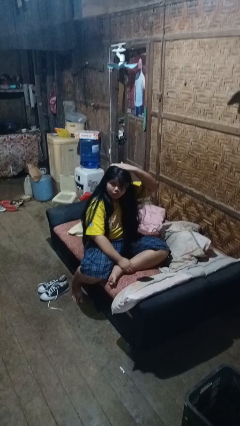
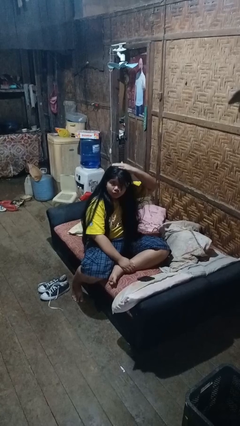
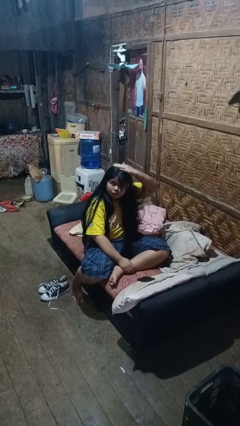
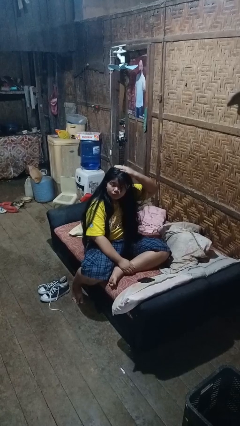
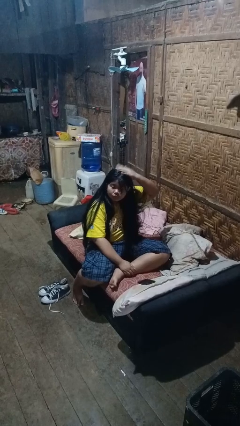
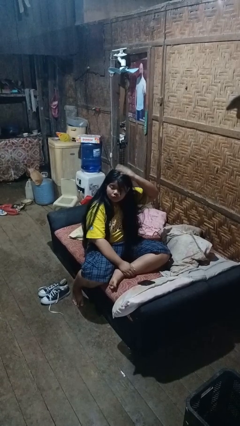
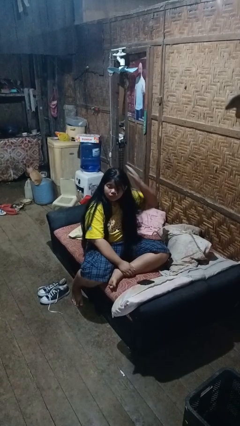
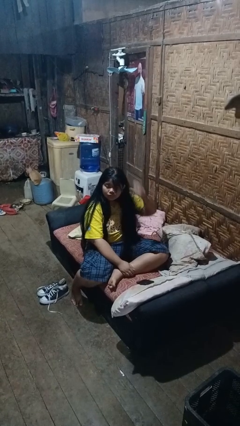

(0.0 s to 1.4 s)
person pats head

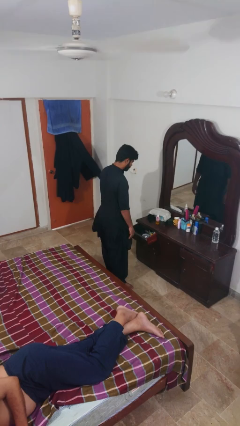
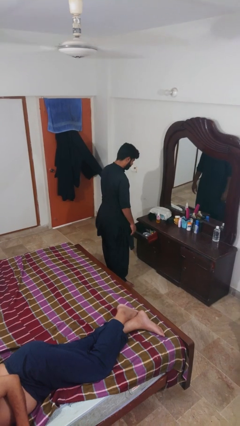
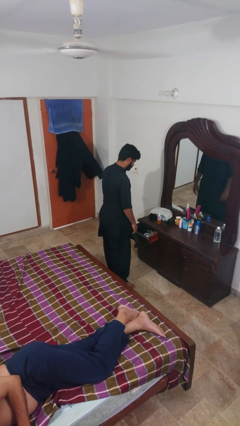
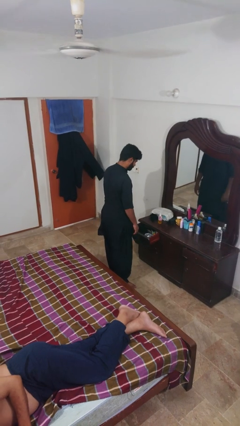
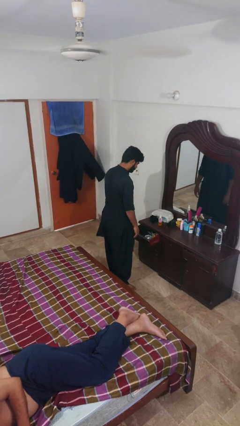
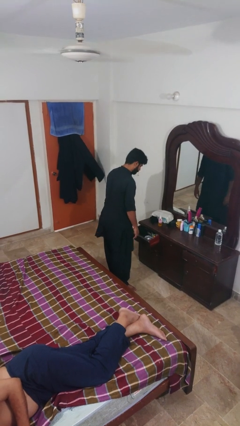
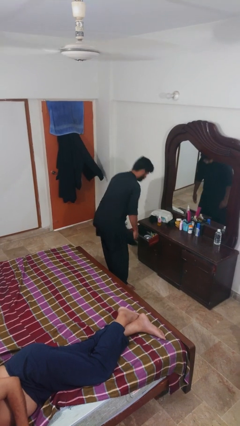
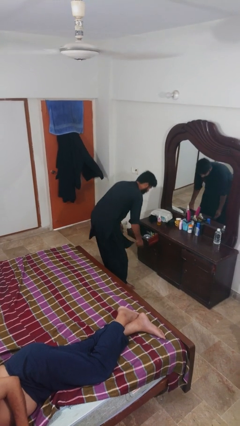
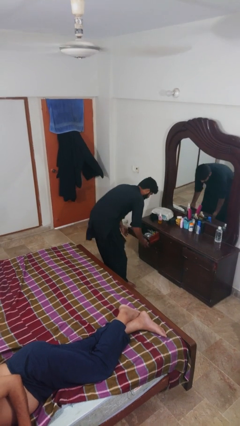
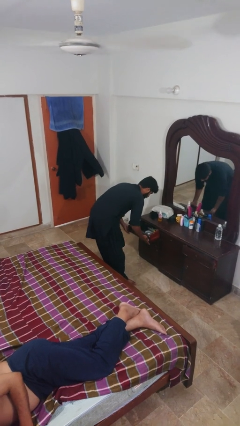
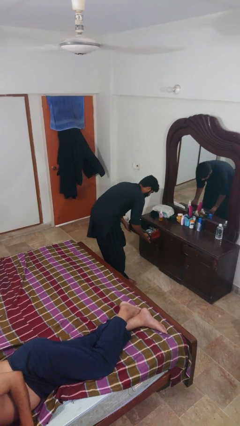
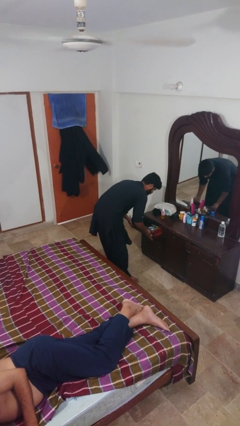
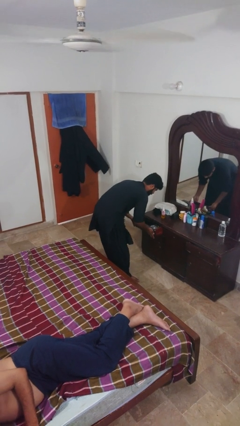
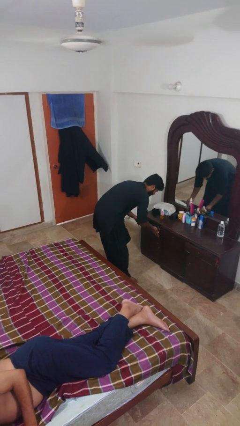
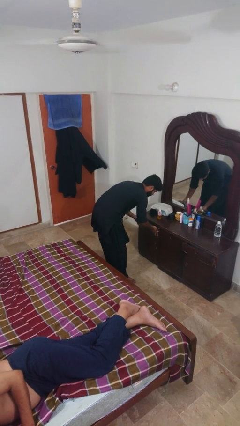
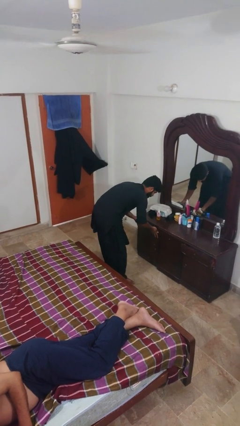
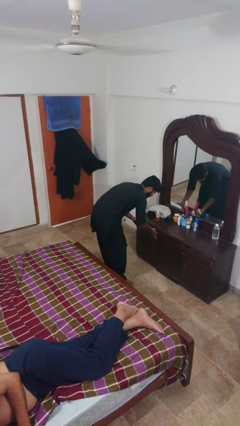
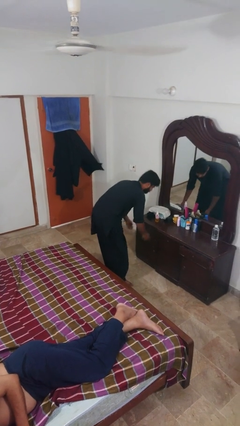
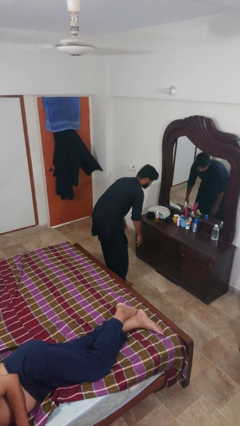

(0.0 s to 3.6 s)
person closes dresser drawer

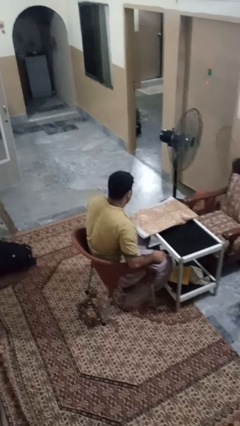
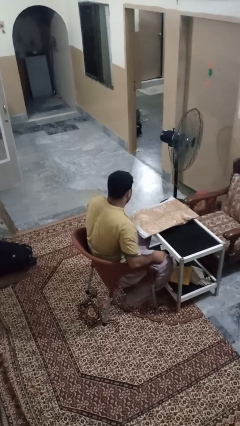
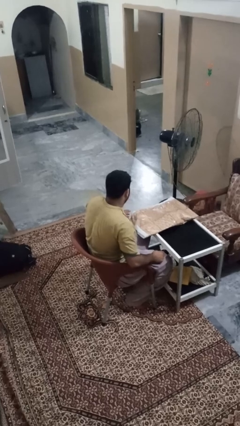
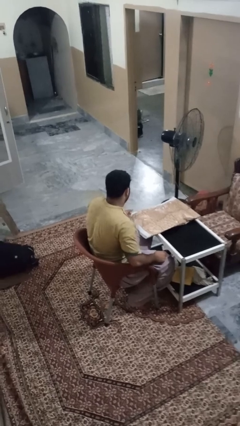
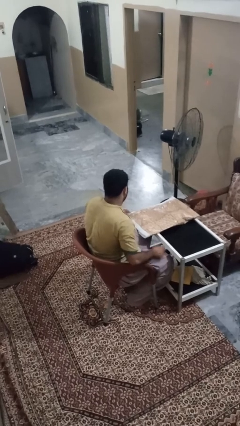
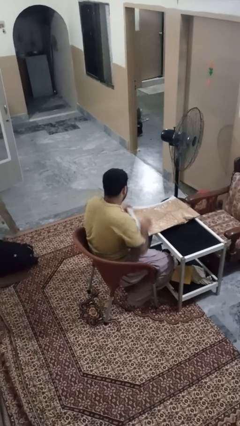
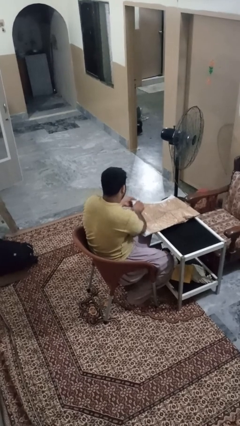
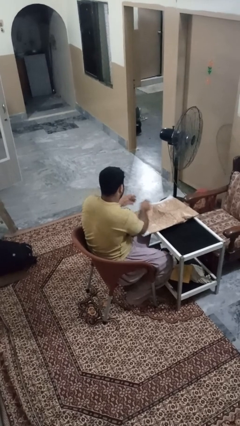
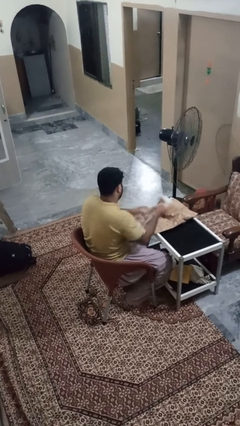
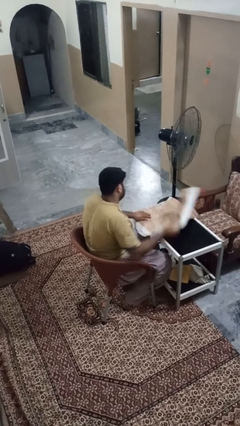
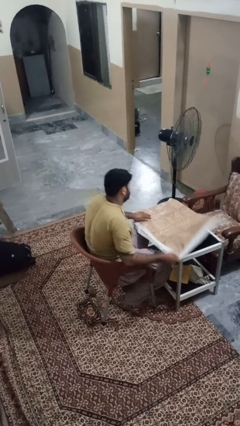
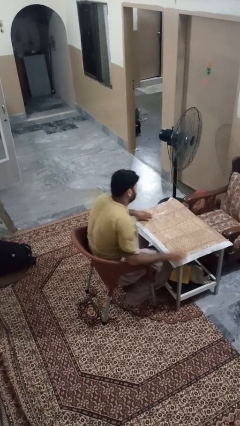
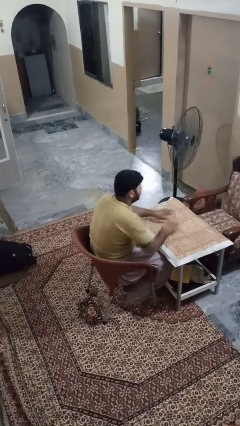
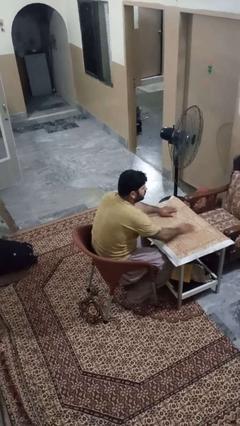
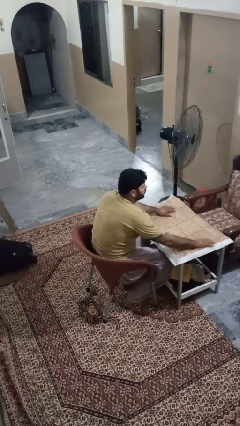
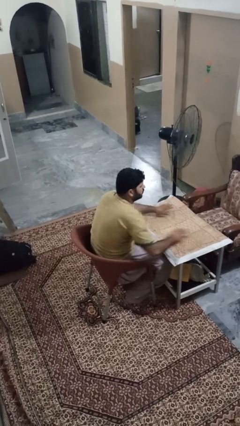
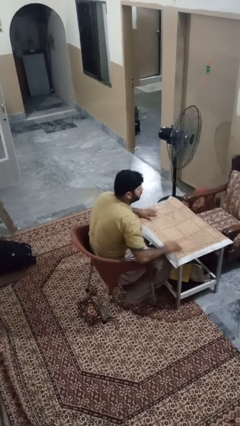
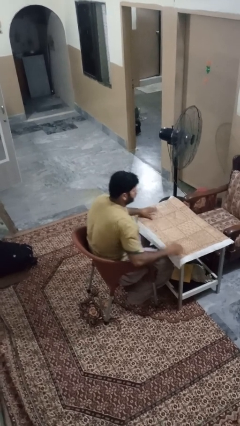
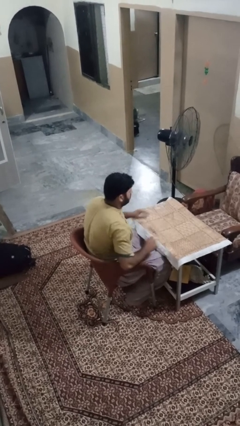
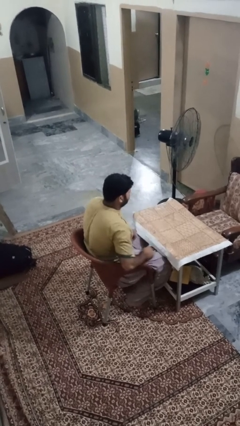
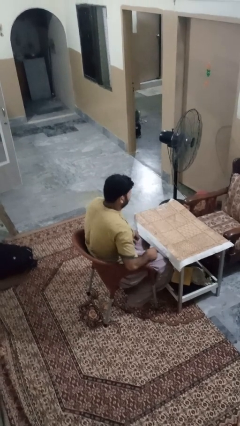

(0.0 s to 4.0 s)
person spreads tablecloth

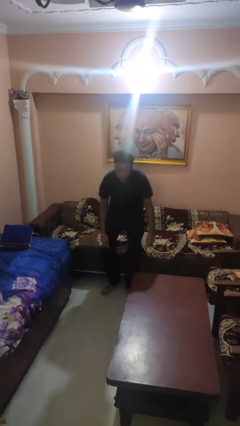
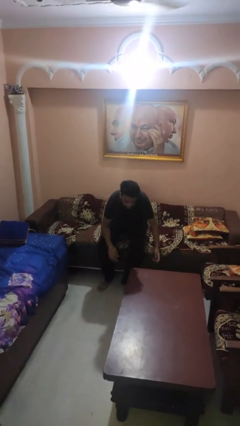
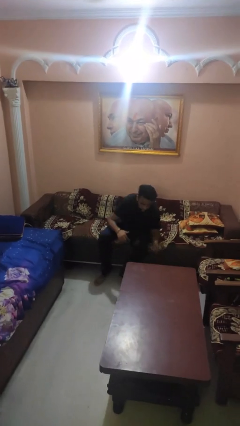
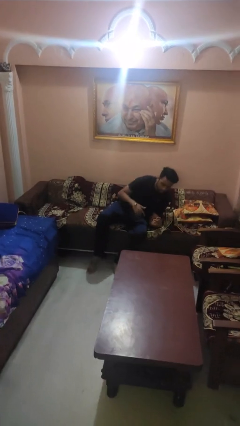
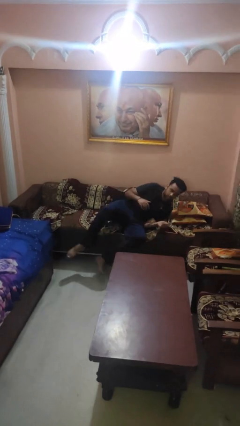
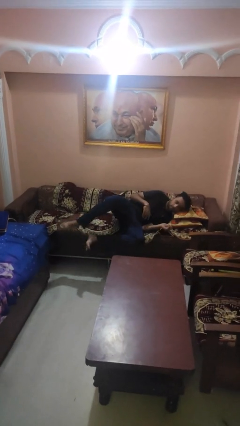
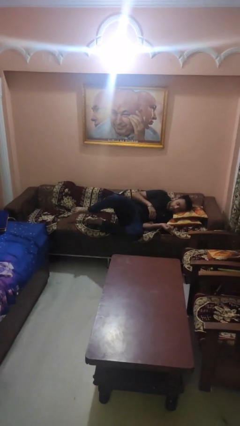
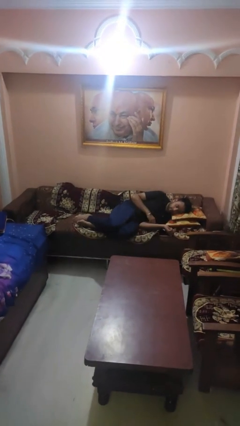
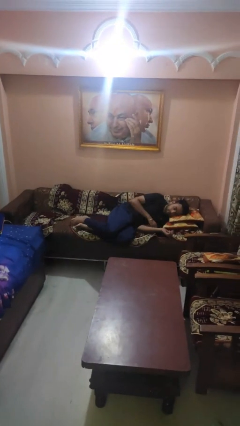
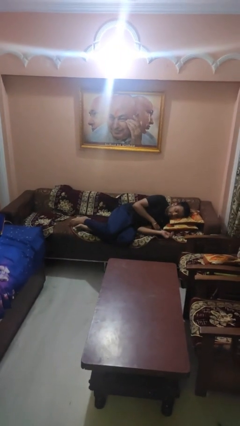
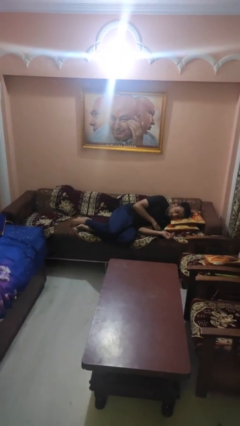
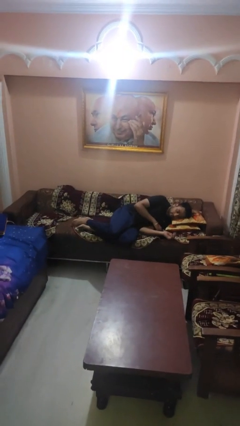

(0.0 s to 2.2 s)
person lies down on couch

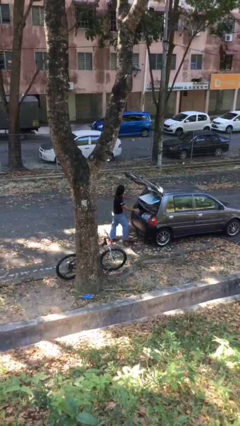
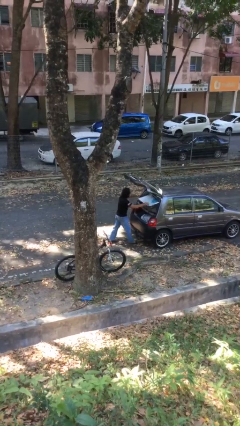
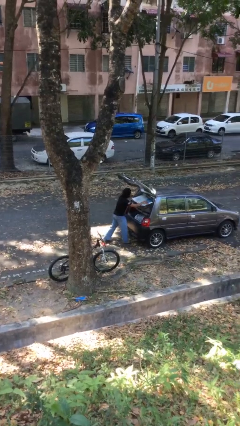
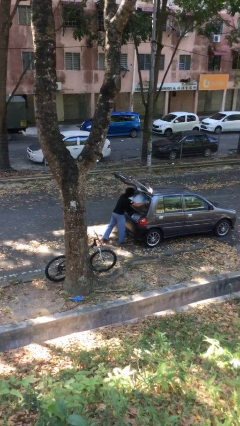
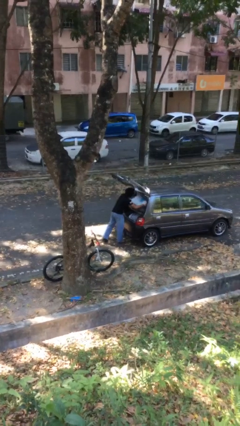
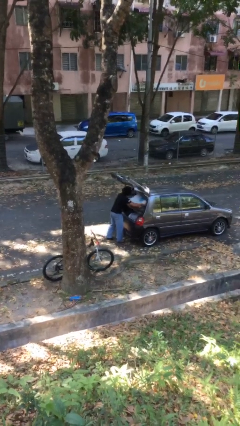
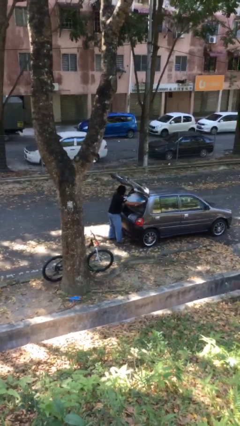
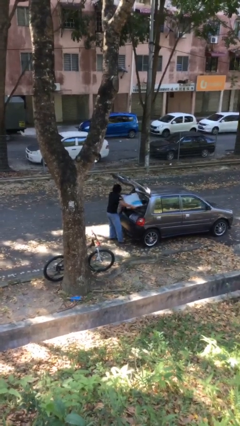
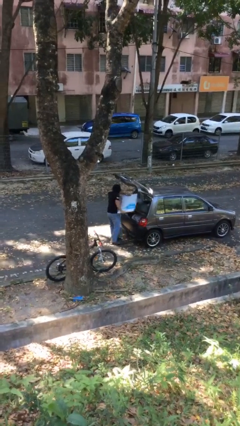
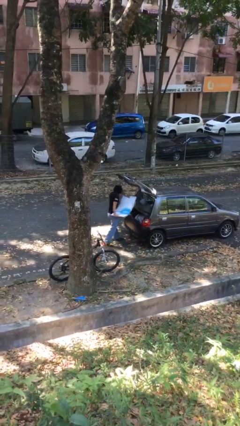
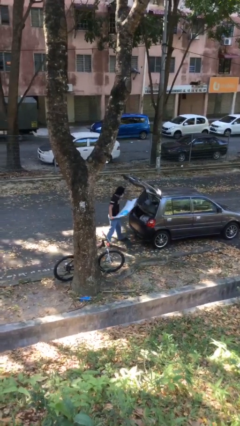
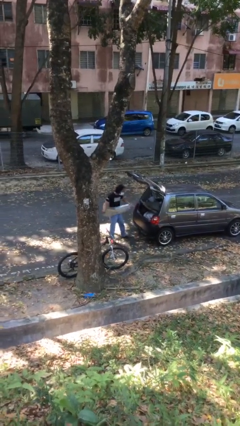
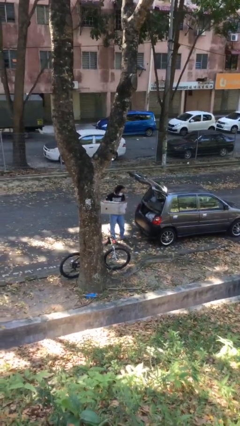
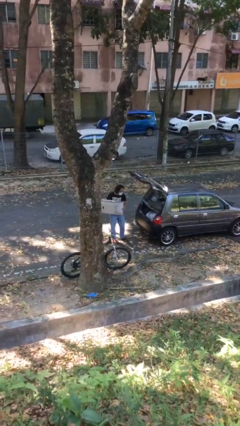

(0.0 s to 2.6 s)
person unloads car

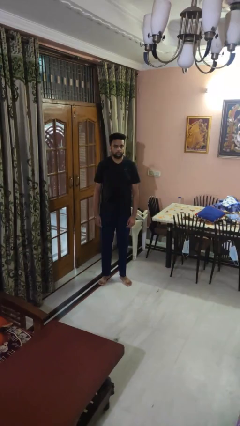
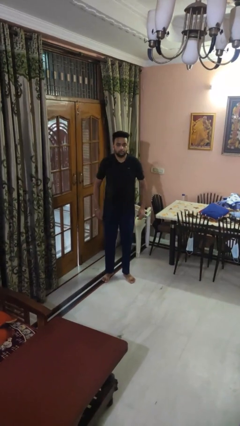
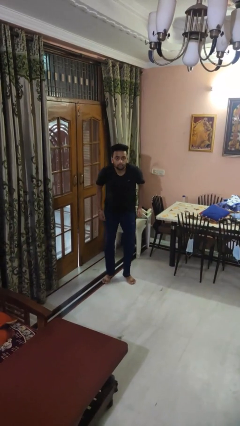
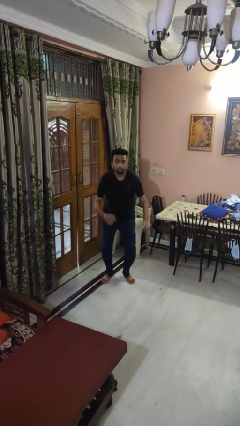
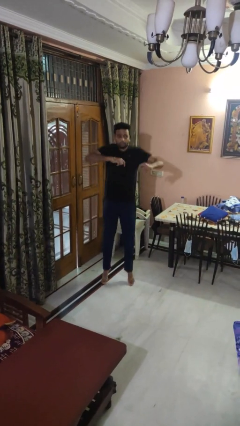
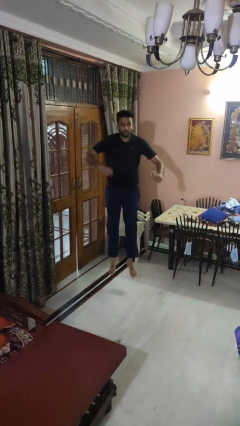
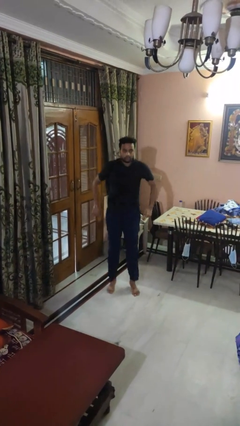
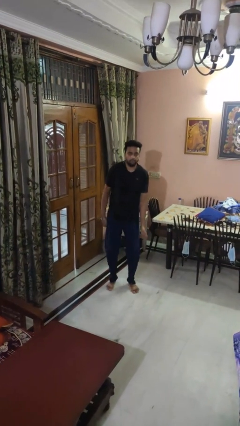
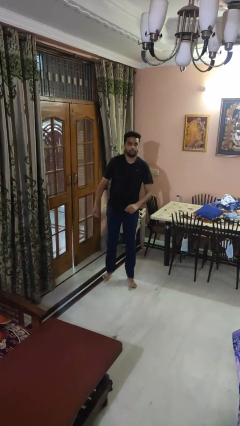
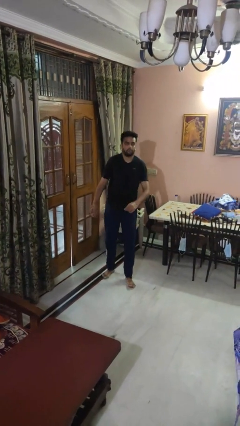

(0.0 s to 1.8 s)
person jumps

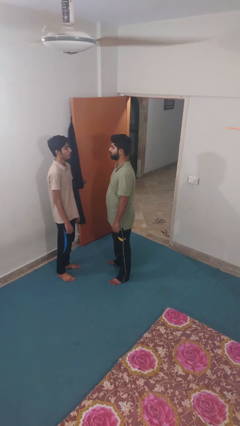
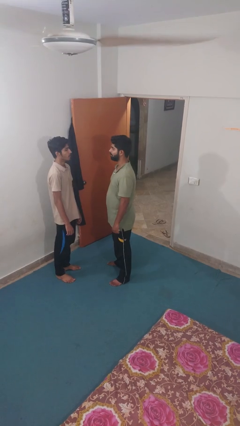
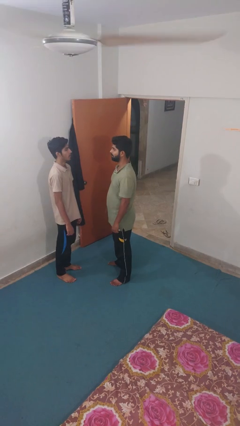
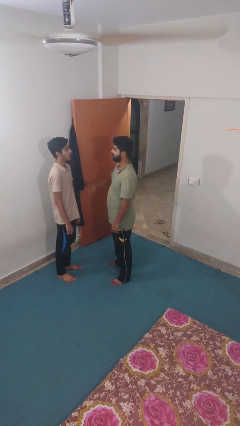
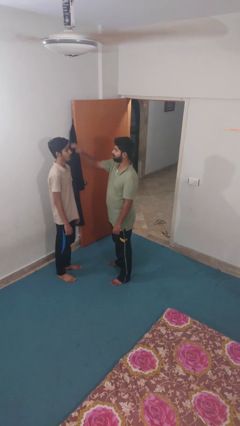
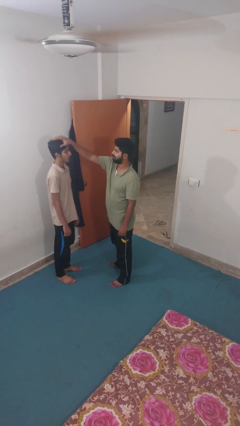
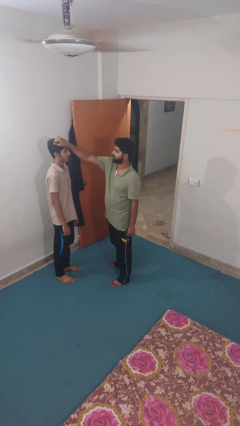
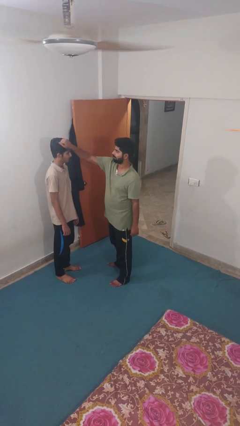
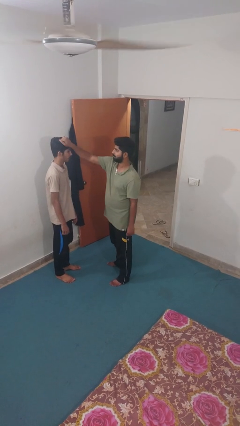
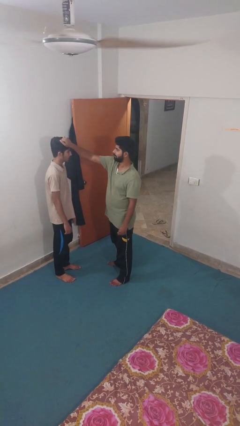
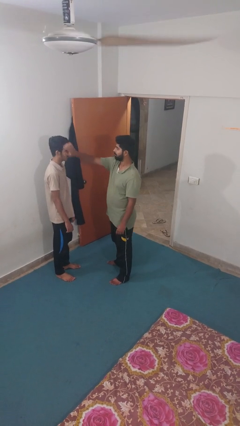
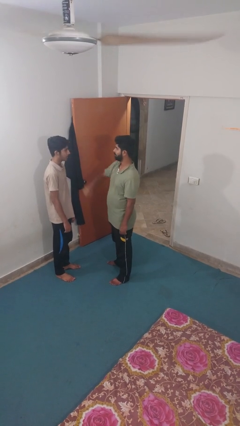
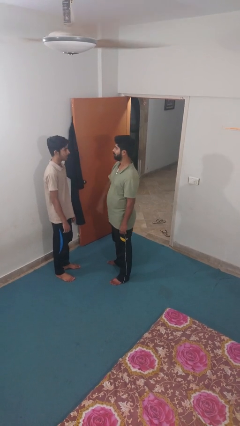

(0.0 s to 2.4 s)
person grabs person by hair
